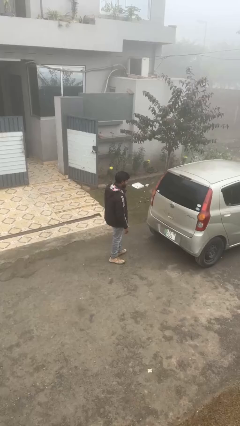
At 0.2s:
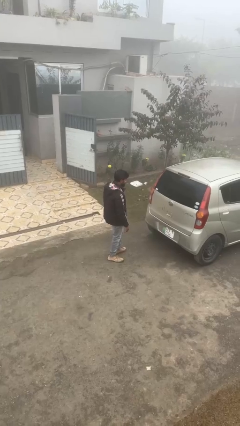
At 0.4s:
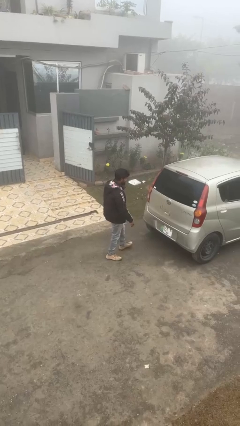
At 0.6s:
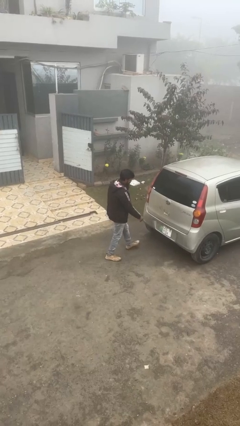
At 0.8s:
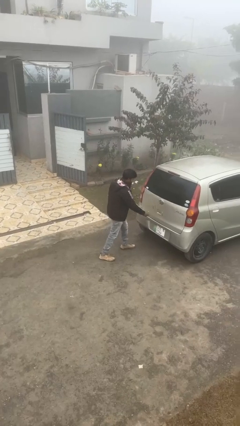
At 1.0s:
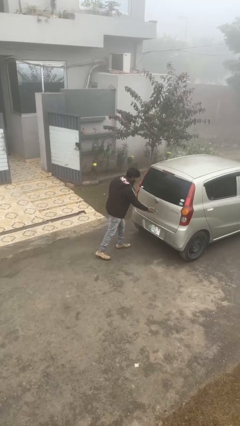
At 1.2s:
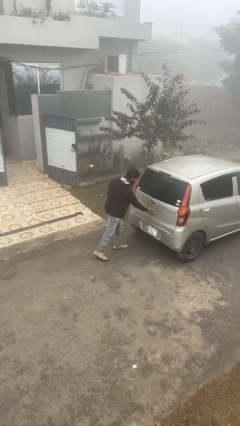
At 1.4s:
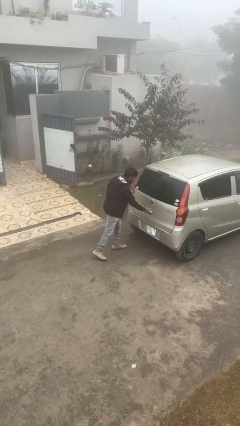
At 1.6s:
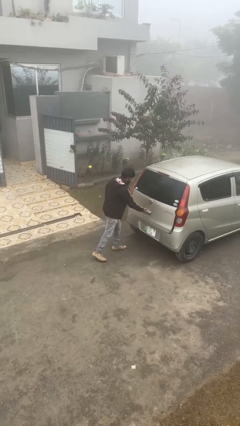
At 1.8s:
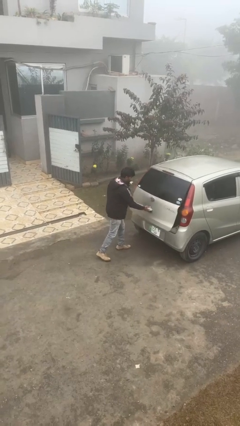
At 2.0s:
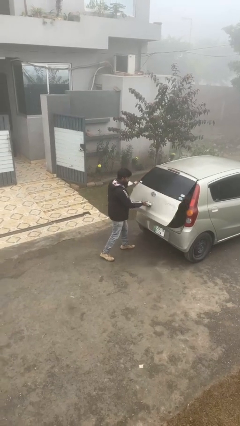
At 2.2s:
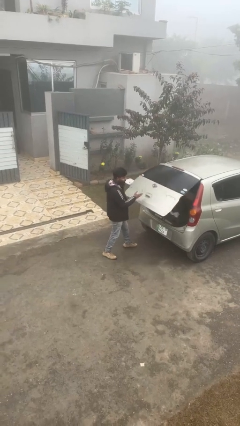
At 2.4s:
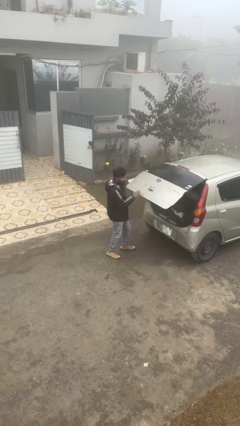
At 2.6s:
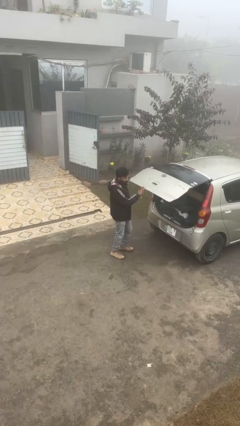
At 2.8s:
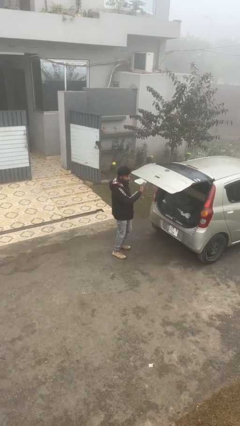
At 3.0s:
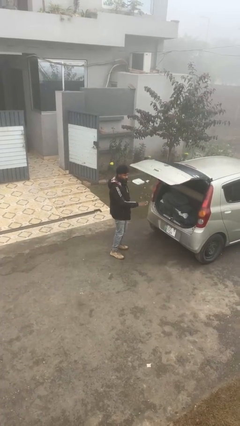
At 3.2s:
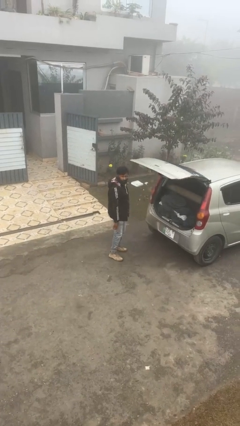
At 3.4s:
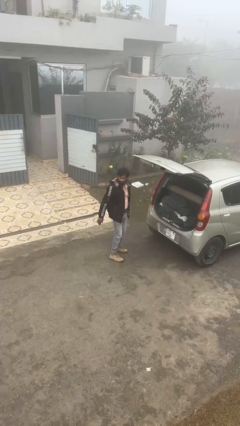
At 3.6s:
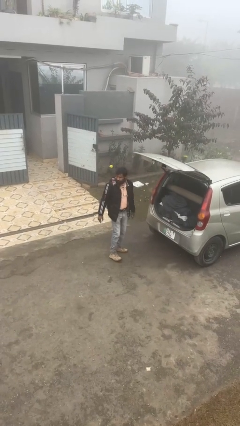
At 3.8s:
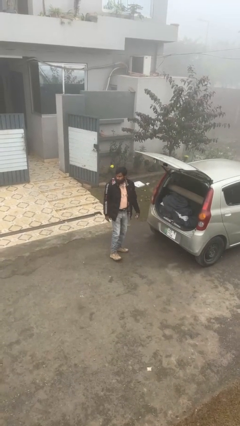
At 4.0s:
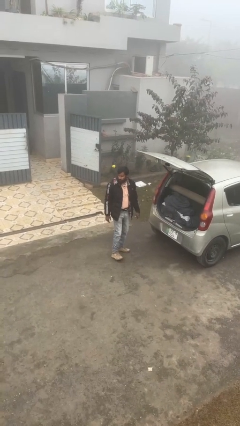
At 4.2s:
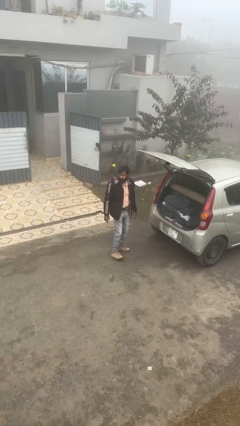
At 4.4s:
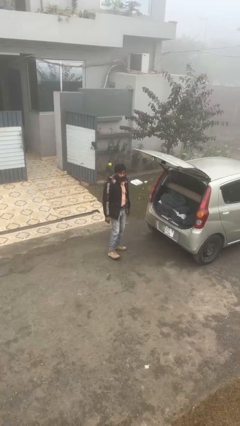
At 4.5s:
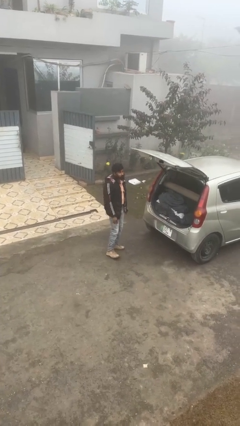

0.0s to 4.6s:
person opens car trunk

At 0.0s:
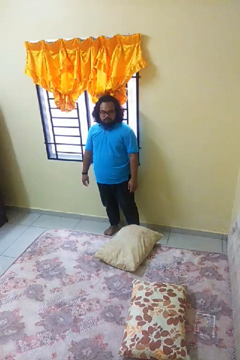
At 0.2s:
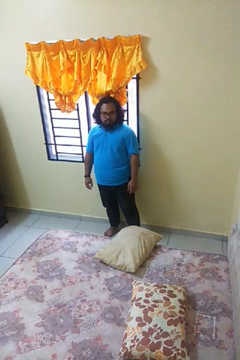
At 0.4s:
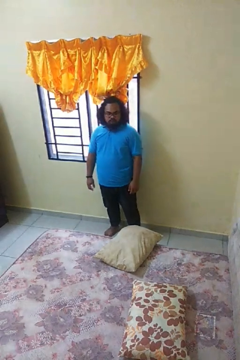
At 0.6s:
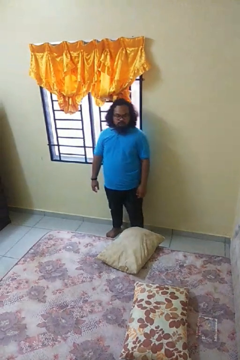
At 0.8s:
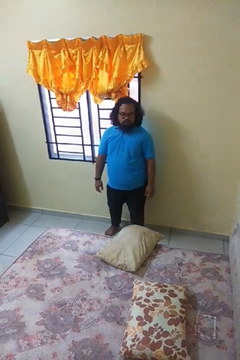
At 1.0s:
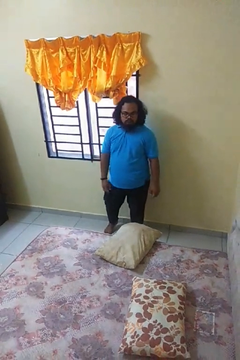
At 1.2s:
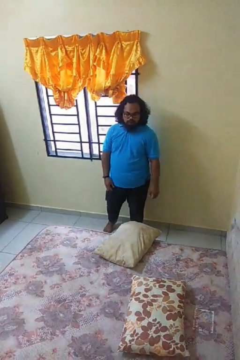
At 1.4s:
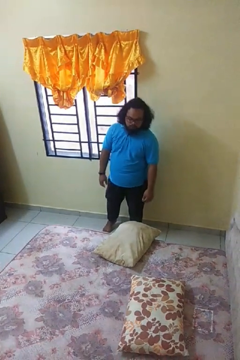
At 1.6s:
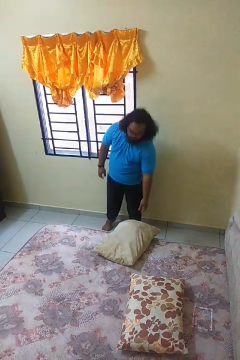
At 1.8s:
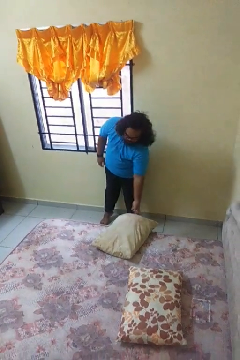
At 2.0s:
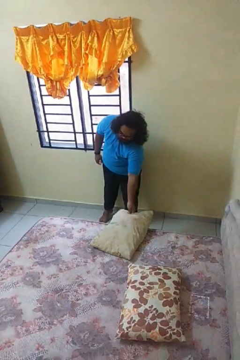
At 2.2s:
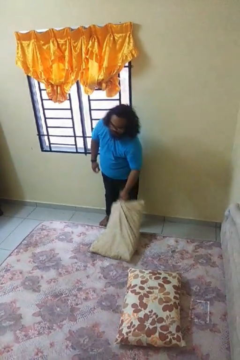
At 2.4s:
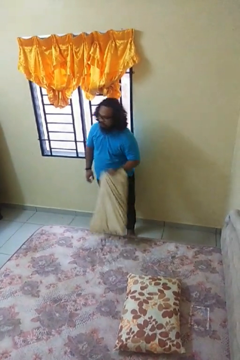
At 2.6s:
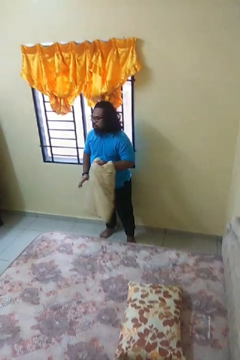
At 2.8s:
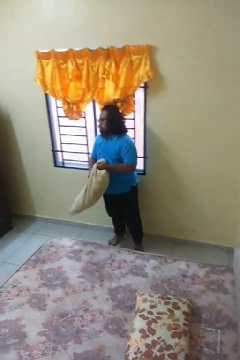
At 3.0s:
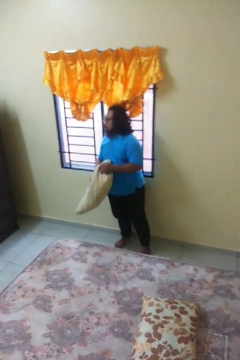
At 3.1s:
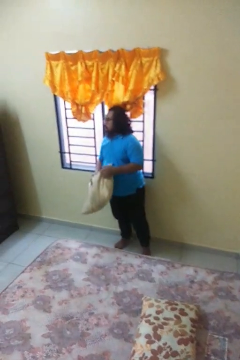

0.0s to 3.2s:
person picks up object from bed

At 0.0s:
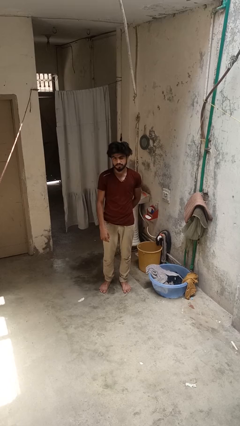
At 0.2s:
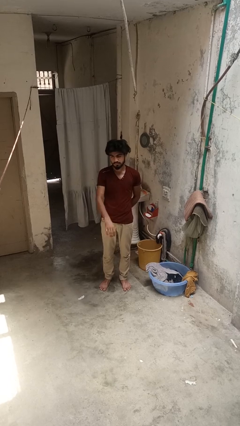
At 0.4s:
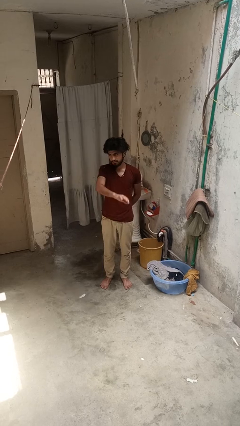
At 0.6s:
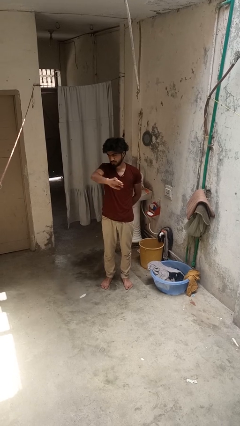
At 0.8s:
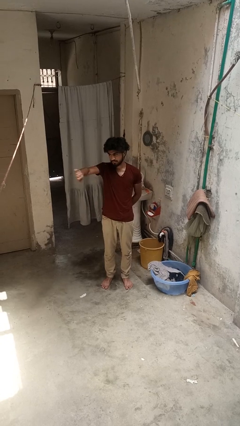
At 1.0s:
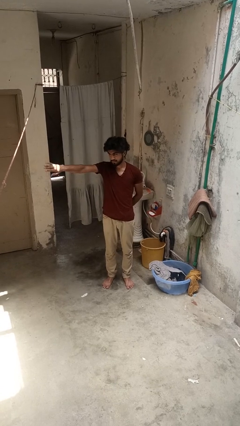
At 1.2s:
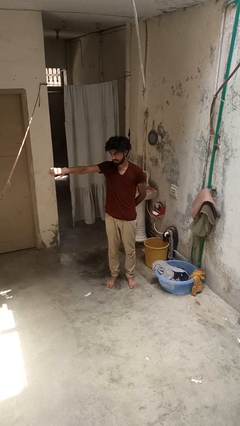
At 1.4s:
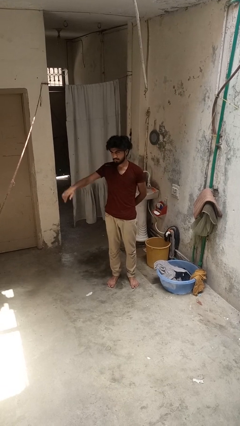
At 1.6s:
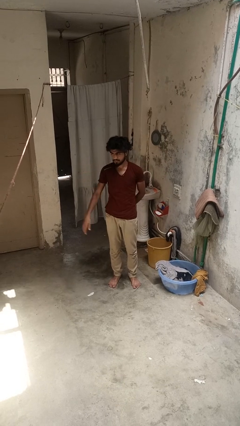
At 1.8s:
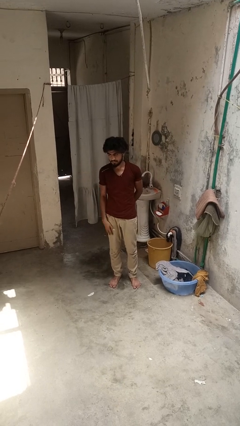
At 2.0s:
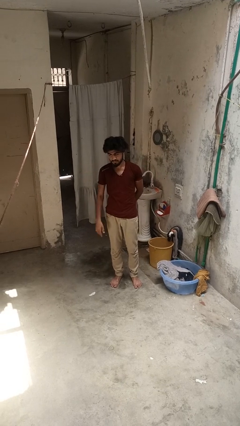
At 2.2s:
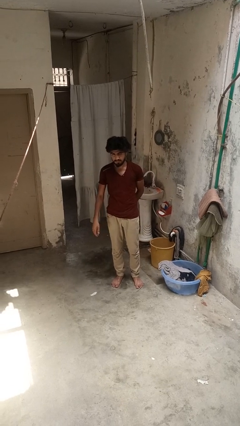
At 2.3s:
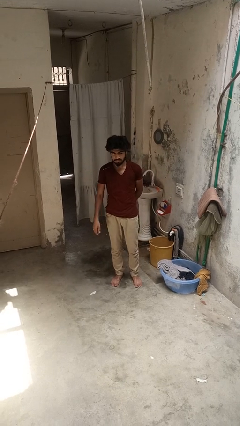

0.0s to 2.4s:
person gestures swipe right

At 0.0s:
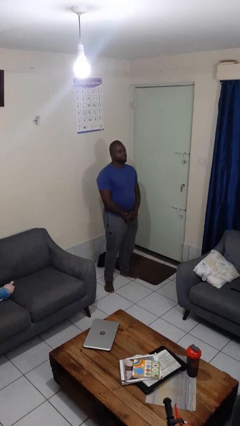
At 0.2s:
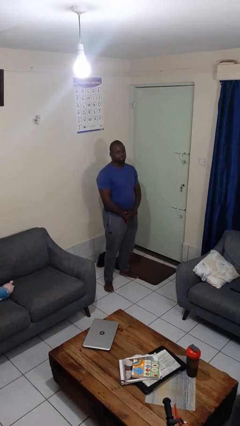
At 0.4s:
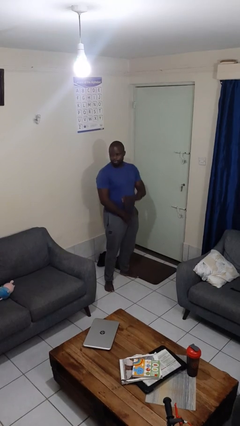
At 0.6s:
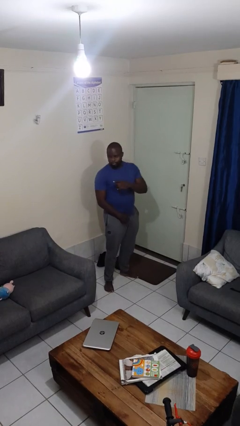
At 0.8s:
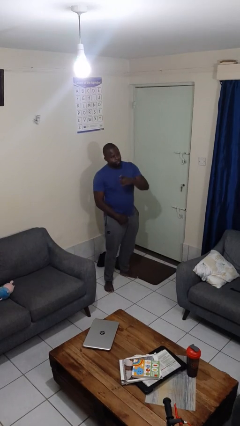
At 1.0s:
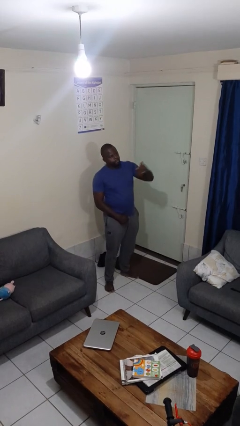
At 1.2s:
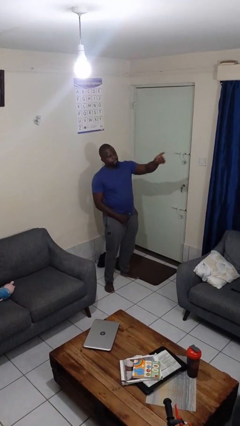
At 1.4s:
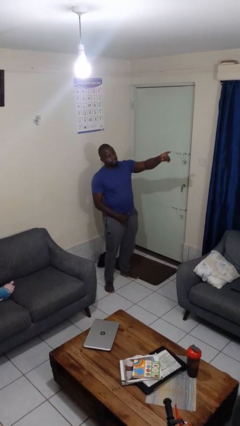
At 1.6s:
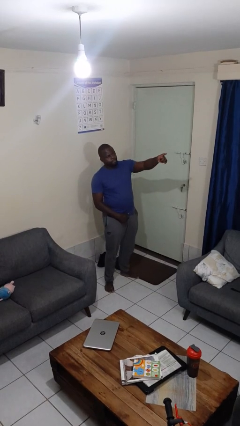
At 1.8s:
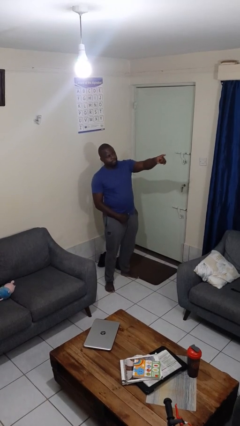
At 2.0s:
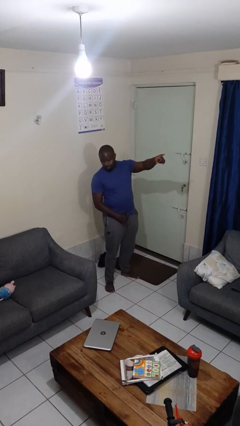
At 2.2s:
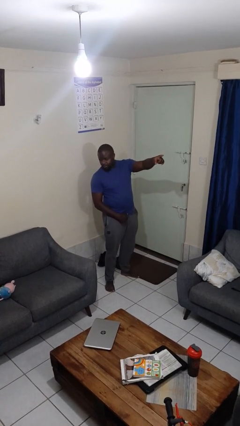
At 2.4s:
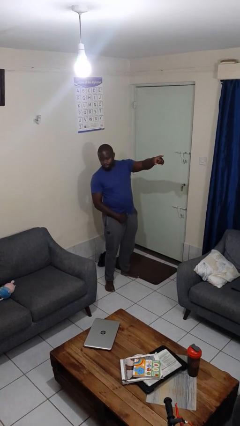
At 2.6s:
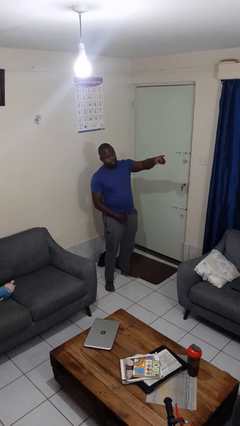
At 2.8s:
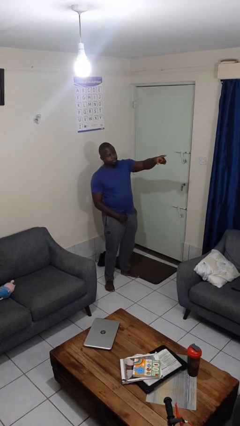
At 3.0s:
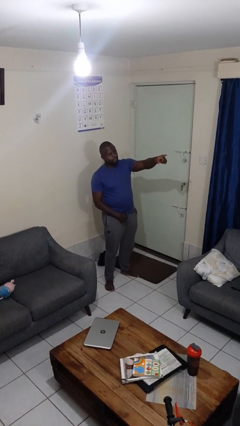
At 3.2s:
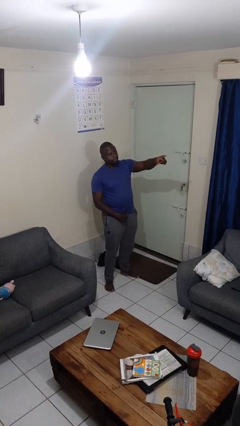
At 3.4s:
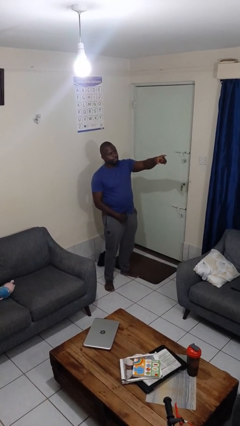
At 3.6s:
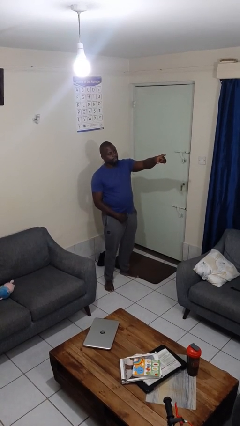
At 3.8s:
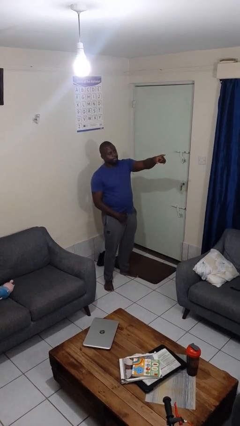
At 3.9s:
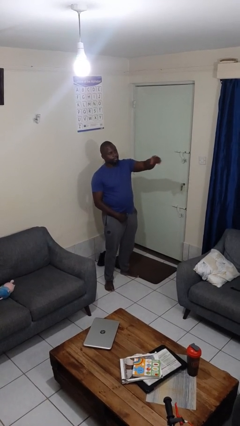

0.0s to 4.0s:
person points at person

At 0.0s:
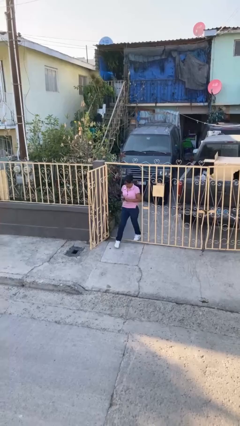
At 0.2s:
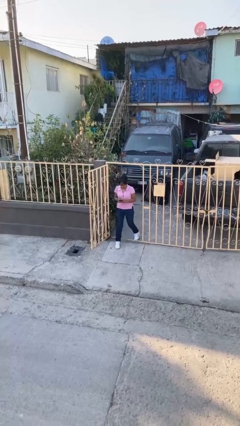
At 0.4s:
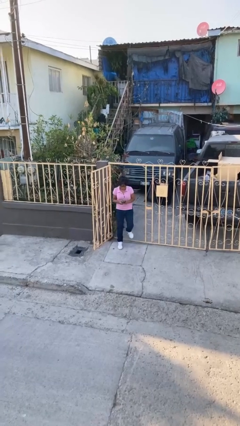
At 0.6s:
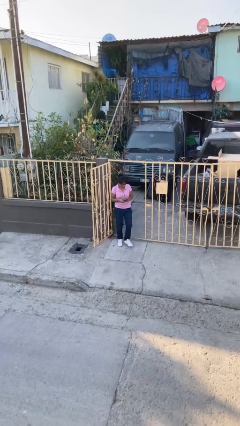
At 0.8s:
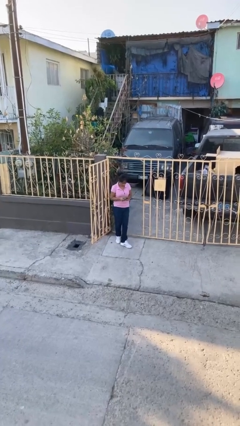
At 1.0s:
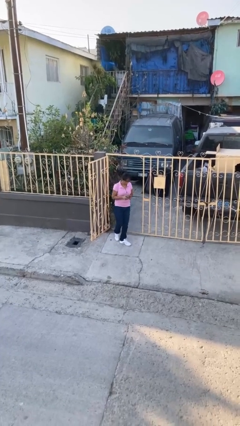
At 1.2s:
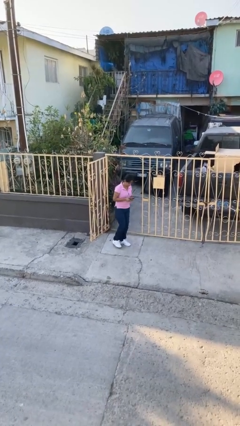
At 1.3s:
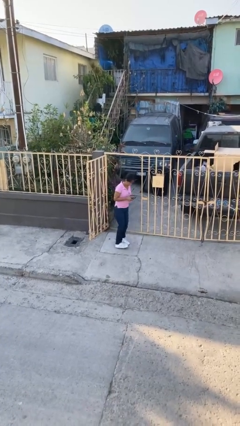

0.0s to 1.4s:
person enters scene through structure

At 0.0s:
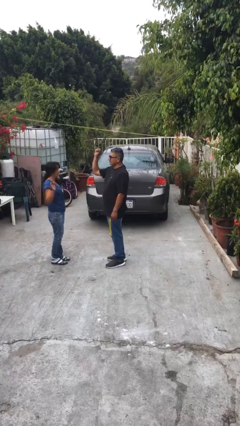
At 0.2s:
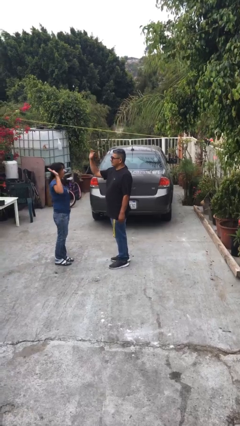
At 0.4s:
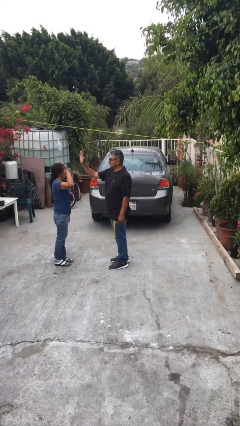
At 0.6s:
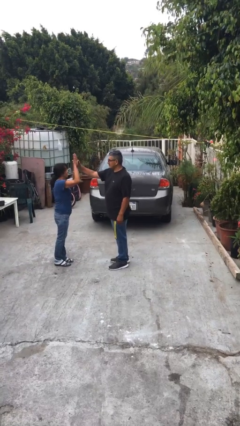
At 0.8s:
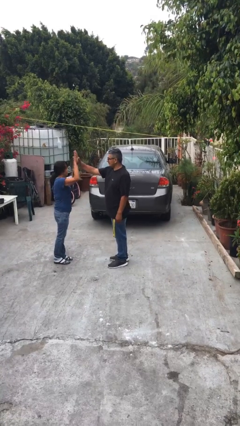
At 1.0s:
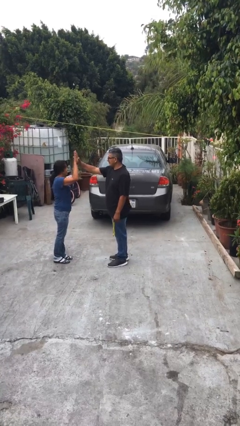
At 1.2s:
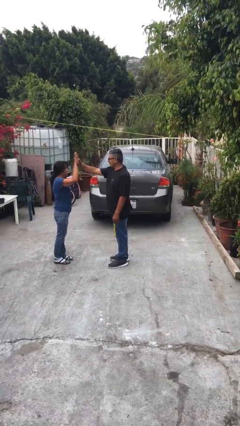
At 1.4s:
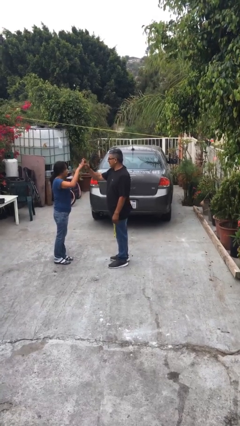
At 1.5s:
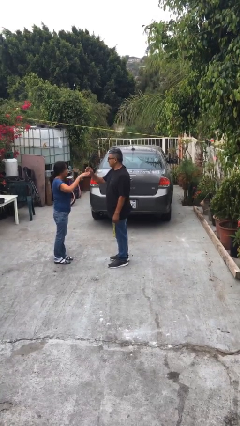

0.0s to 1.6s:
person highfives hand

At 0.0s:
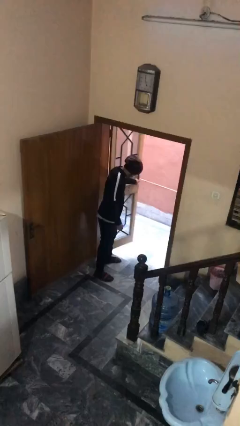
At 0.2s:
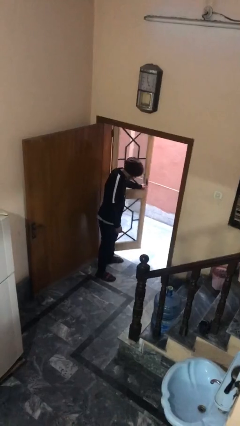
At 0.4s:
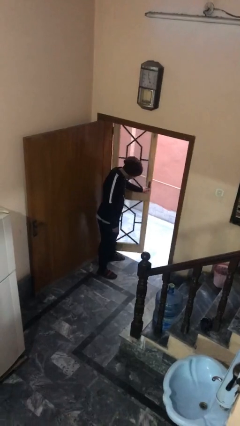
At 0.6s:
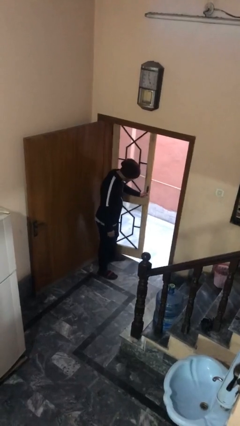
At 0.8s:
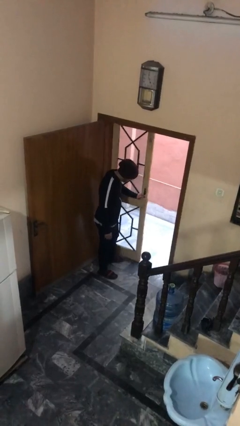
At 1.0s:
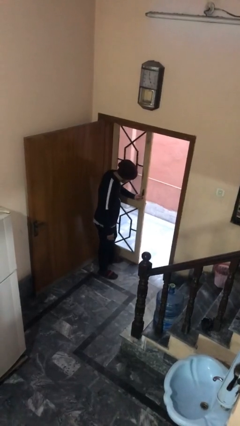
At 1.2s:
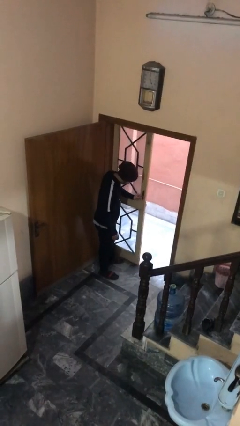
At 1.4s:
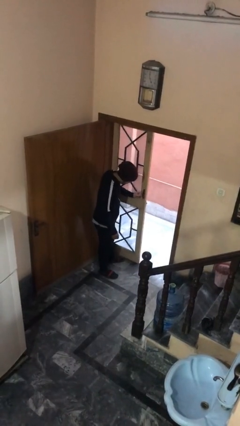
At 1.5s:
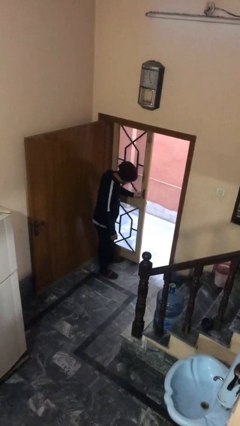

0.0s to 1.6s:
person closes facility door
